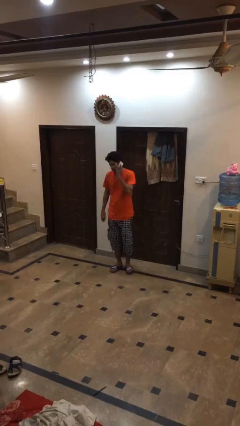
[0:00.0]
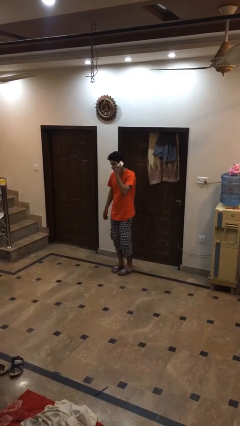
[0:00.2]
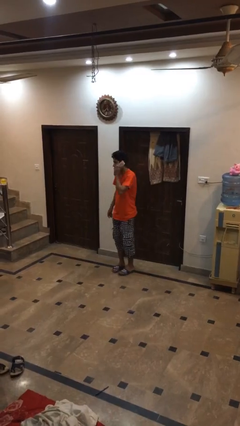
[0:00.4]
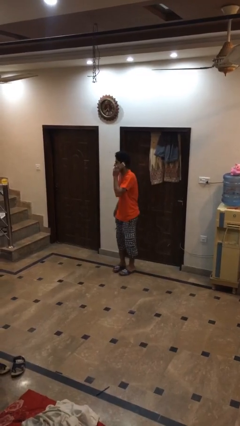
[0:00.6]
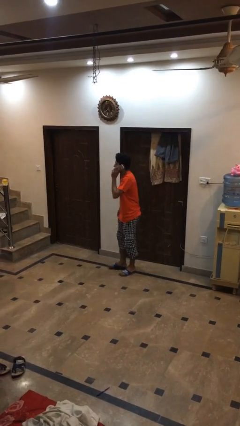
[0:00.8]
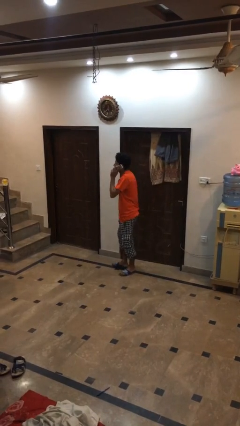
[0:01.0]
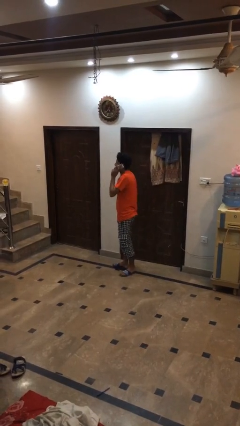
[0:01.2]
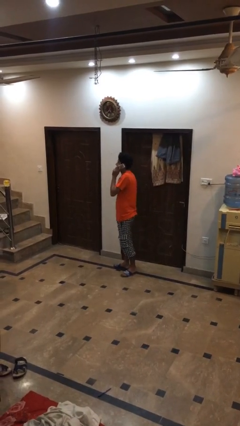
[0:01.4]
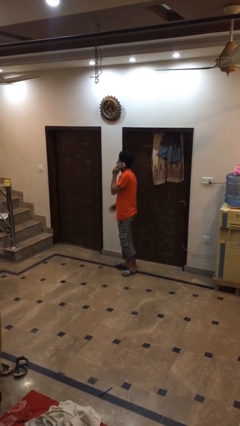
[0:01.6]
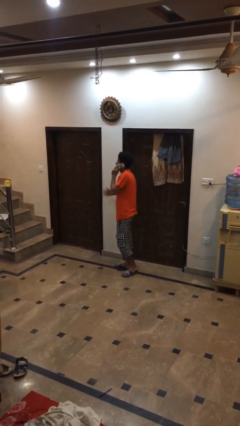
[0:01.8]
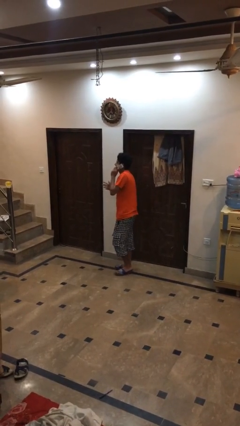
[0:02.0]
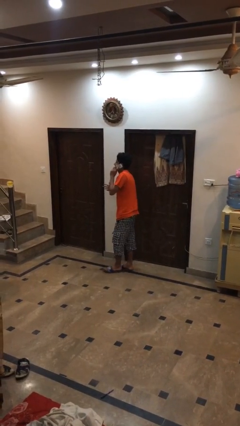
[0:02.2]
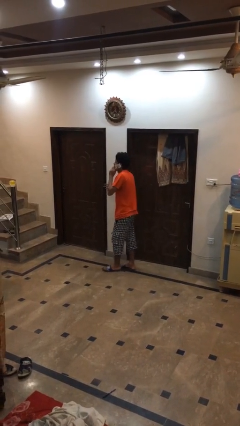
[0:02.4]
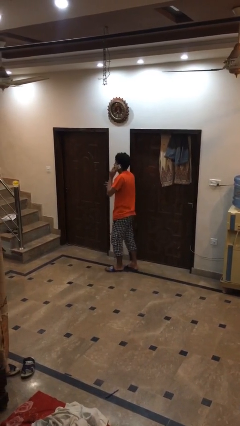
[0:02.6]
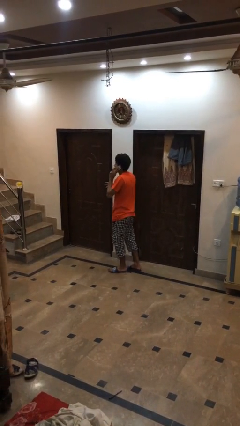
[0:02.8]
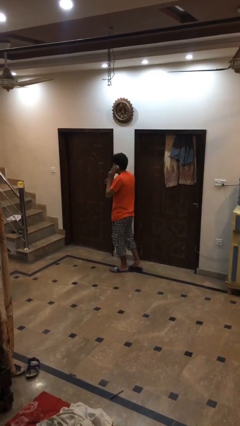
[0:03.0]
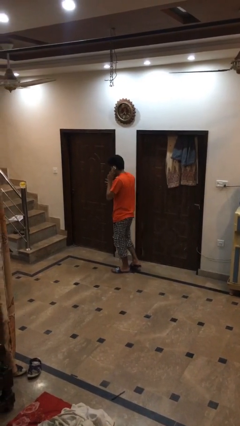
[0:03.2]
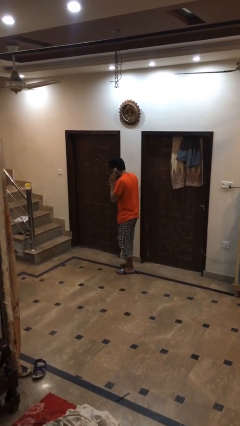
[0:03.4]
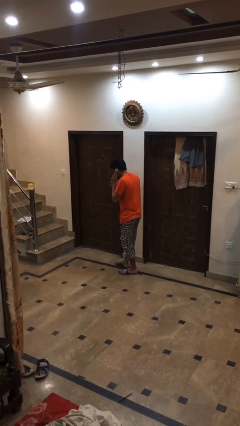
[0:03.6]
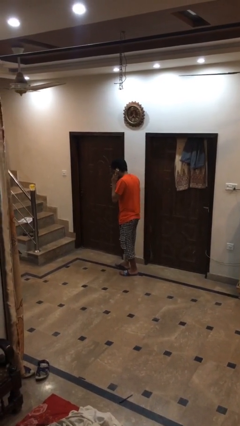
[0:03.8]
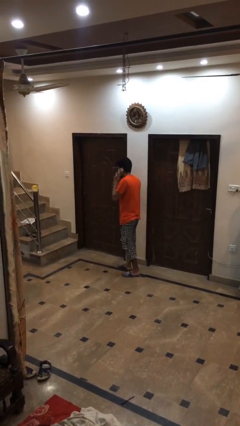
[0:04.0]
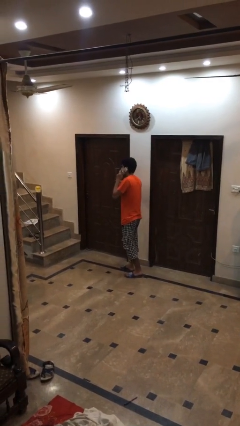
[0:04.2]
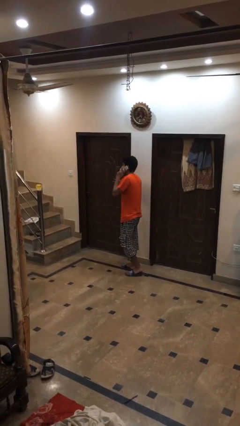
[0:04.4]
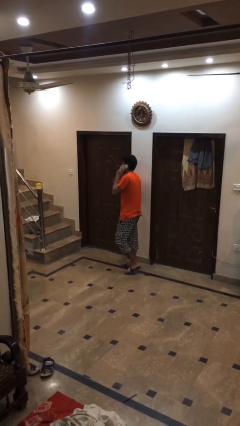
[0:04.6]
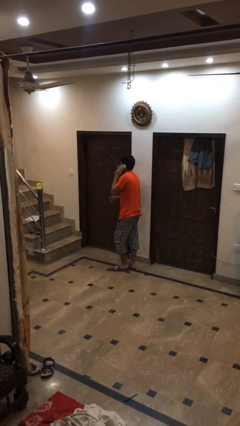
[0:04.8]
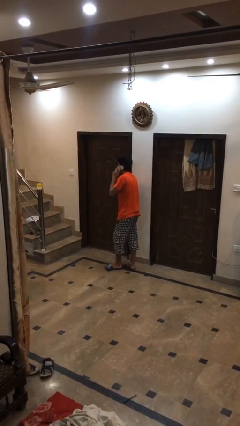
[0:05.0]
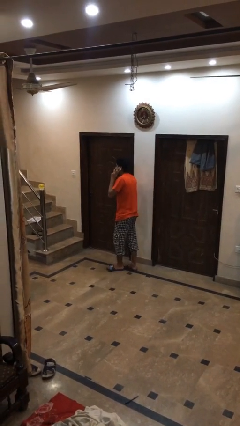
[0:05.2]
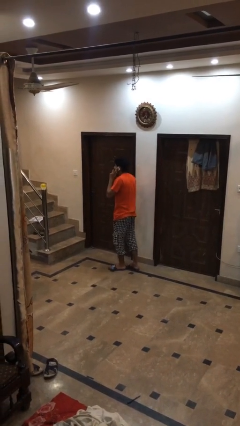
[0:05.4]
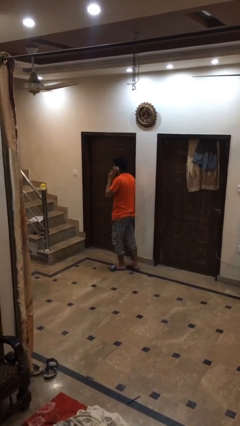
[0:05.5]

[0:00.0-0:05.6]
person talks on phone

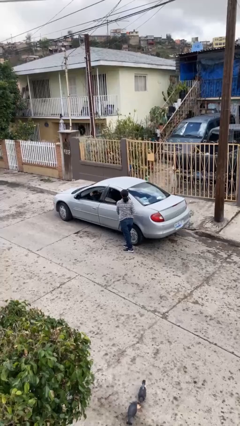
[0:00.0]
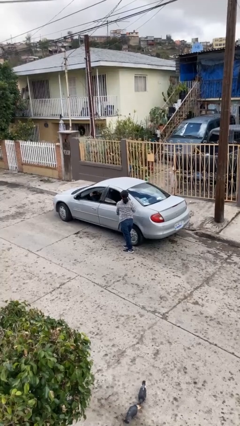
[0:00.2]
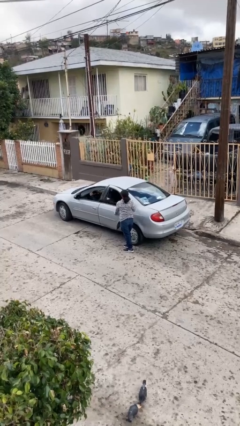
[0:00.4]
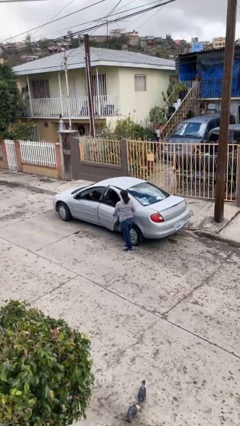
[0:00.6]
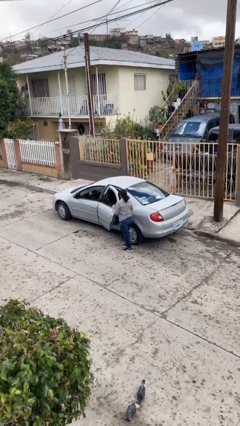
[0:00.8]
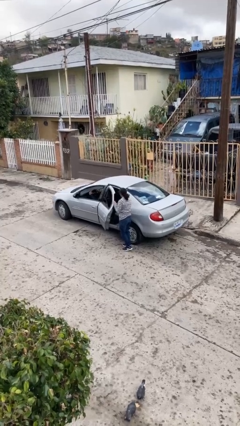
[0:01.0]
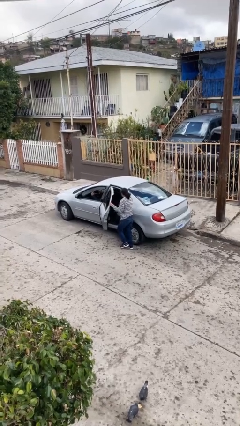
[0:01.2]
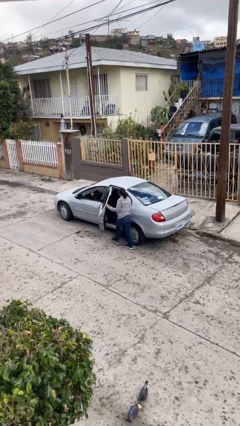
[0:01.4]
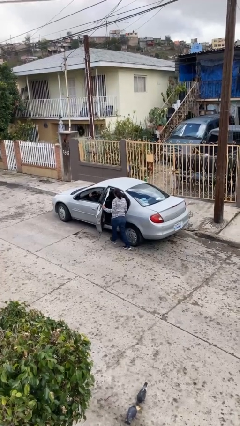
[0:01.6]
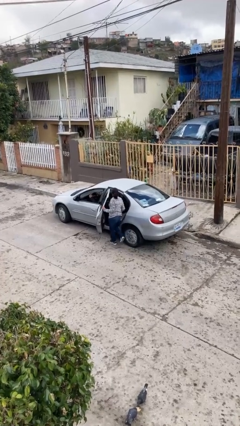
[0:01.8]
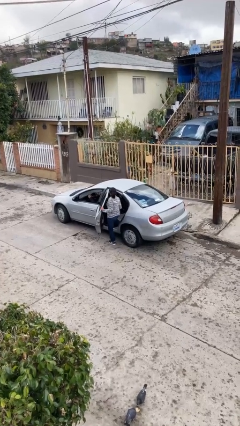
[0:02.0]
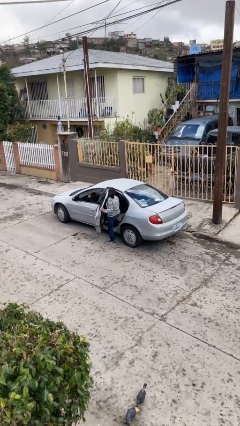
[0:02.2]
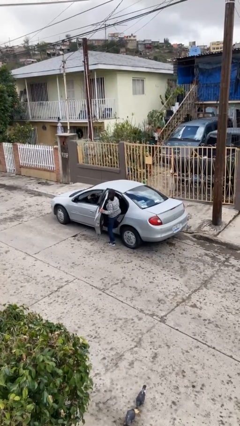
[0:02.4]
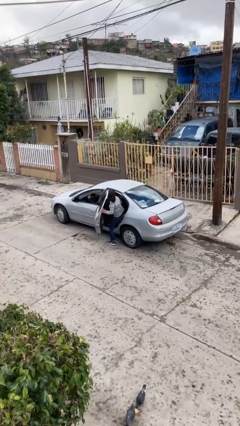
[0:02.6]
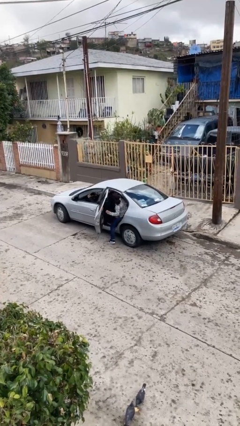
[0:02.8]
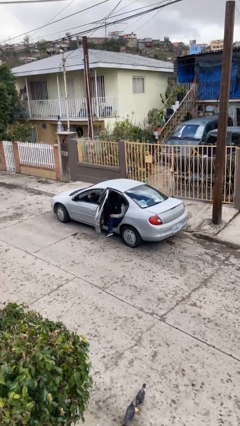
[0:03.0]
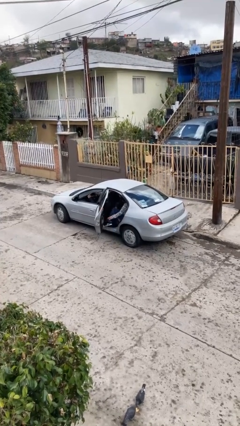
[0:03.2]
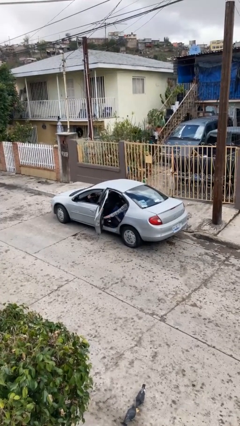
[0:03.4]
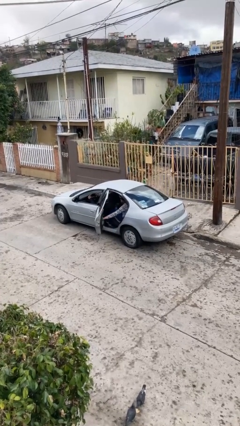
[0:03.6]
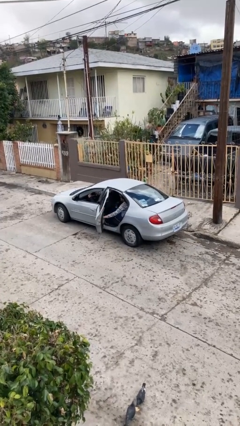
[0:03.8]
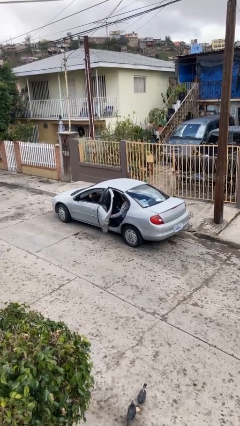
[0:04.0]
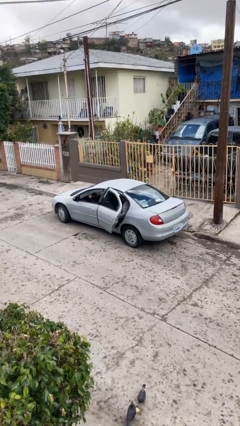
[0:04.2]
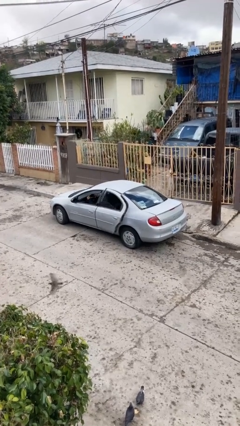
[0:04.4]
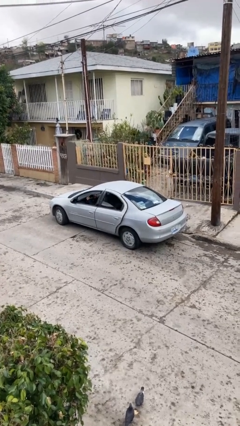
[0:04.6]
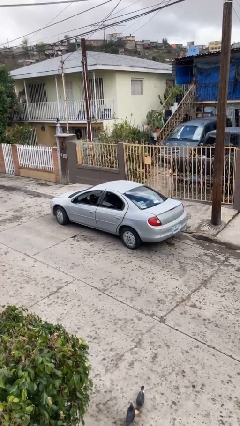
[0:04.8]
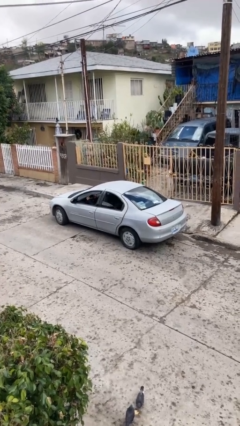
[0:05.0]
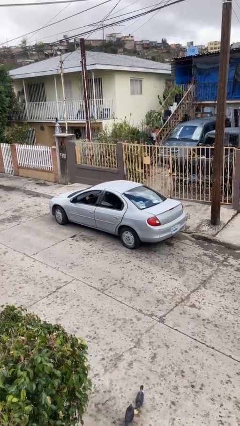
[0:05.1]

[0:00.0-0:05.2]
car picks up person

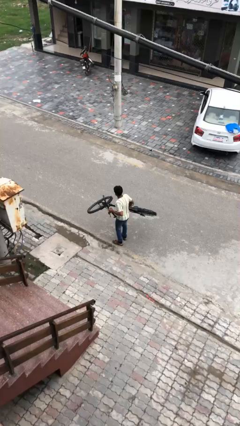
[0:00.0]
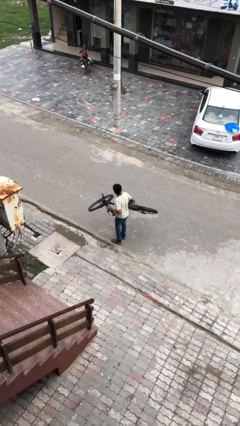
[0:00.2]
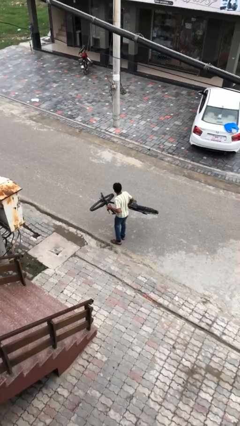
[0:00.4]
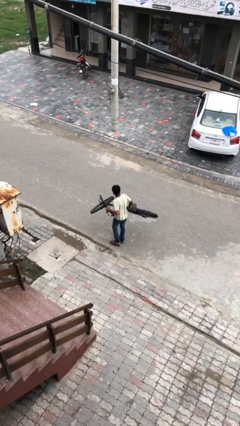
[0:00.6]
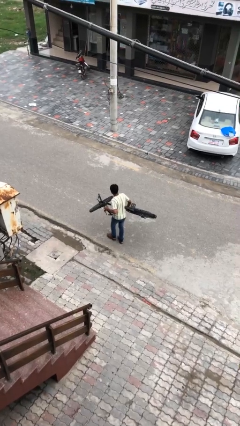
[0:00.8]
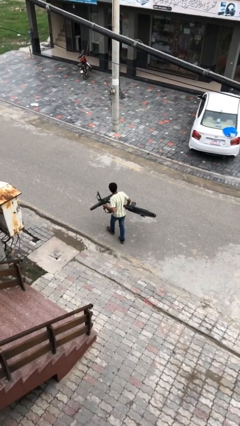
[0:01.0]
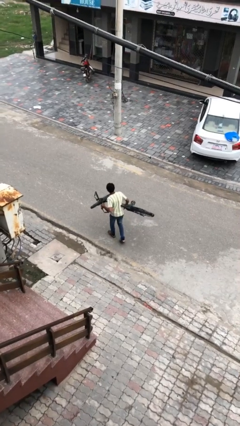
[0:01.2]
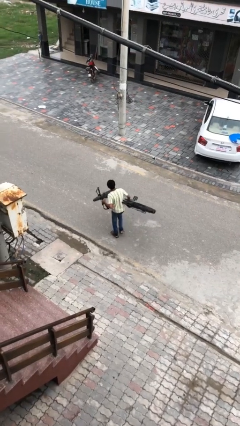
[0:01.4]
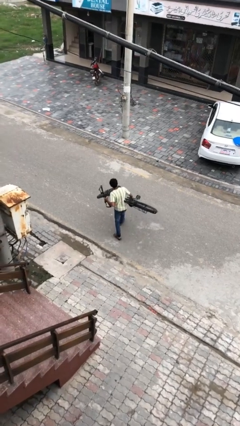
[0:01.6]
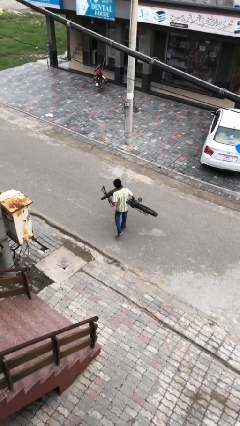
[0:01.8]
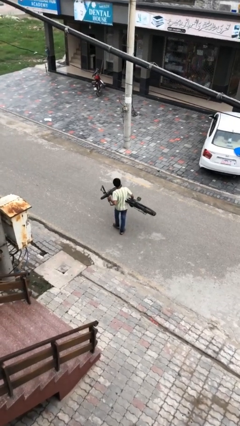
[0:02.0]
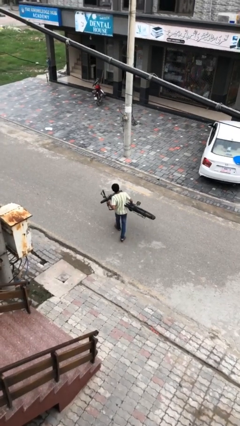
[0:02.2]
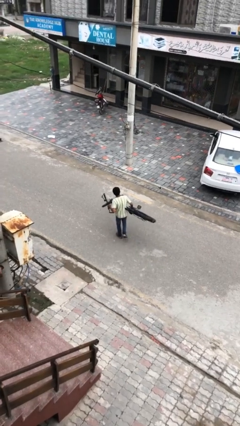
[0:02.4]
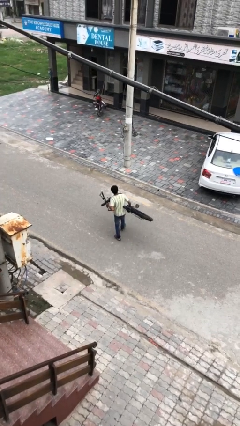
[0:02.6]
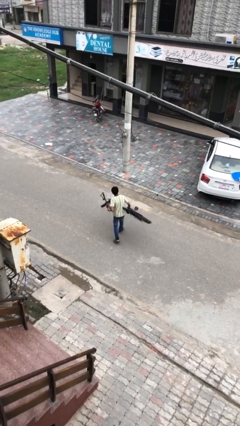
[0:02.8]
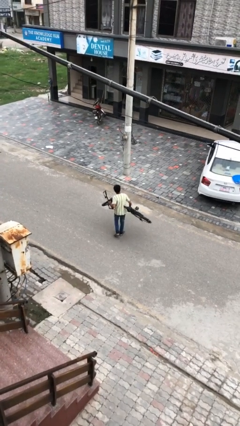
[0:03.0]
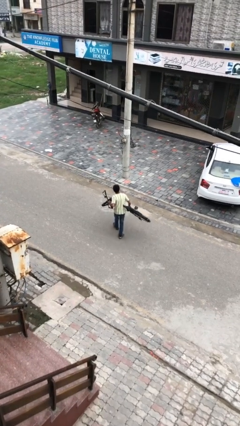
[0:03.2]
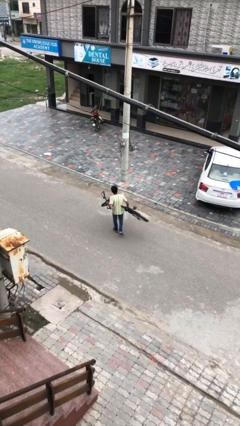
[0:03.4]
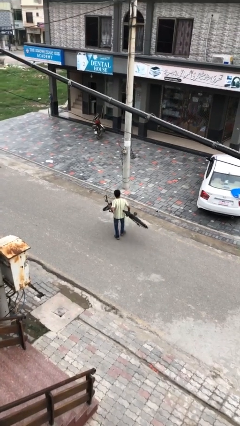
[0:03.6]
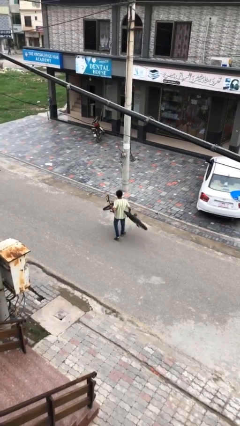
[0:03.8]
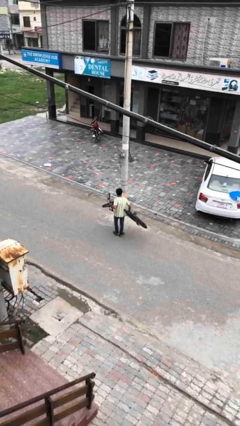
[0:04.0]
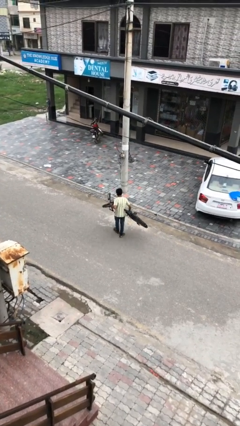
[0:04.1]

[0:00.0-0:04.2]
person carries heavy object

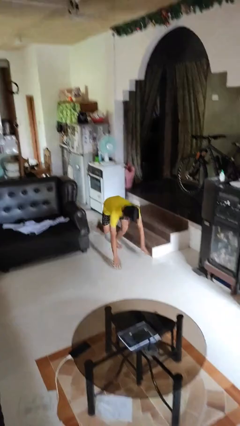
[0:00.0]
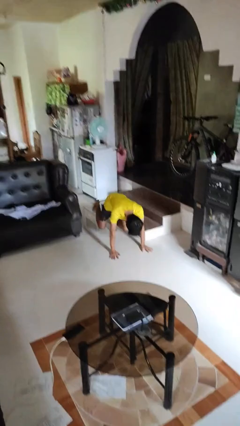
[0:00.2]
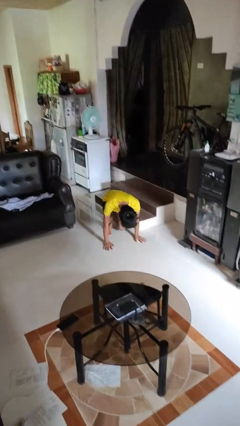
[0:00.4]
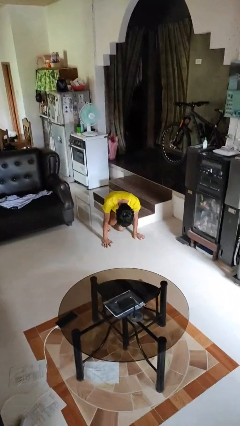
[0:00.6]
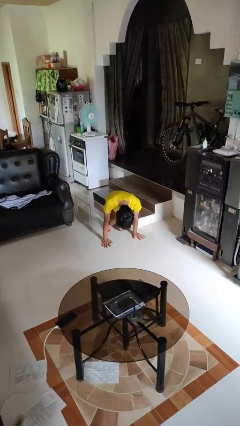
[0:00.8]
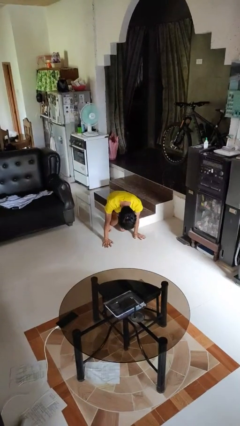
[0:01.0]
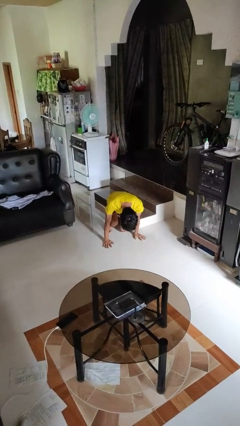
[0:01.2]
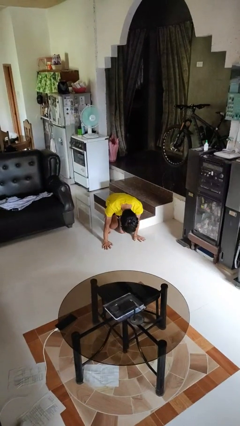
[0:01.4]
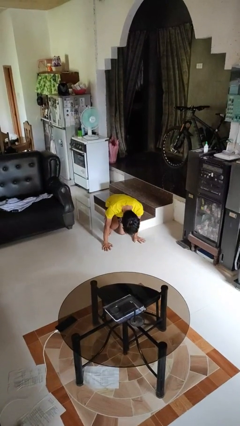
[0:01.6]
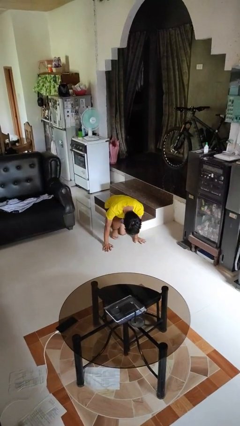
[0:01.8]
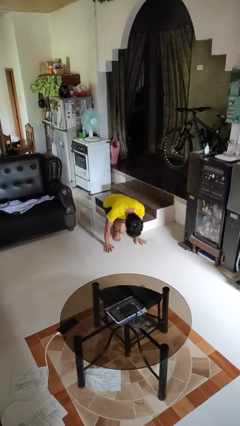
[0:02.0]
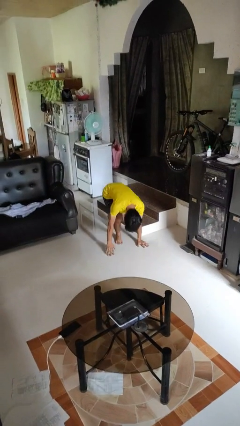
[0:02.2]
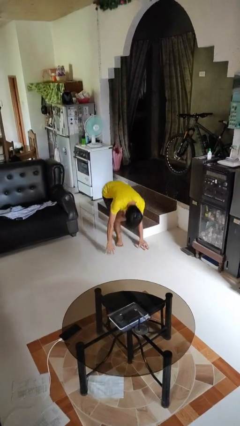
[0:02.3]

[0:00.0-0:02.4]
person trips on object on floor
